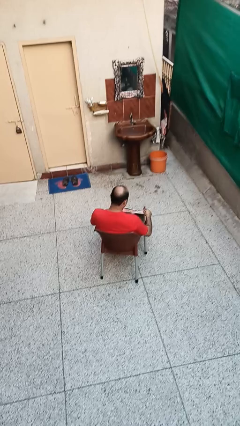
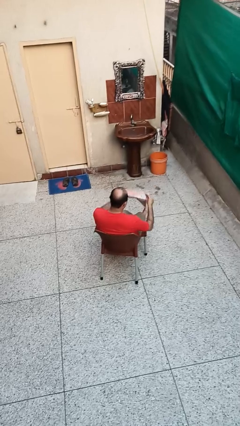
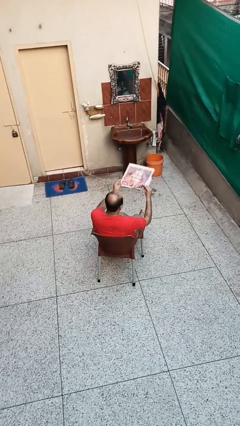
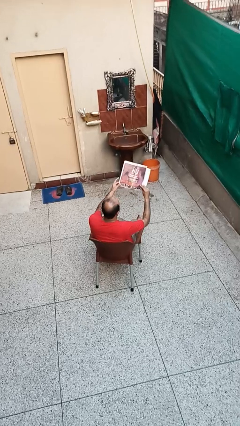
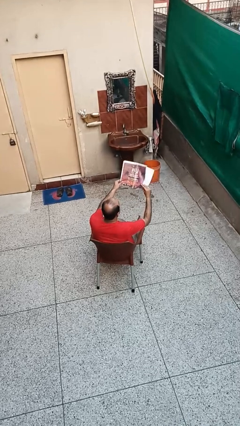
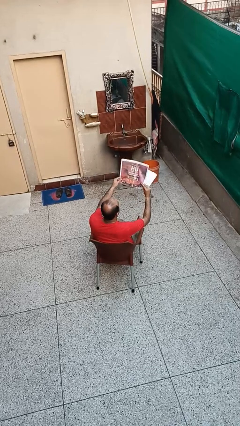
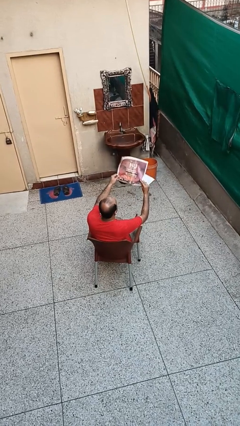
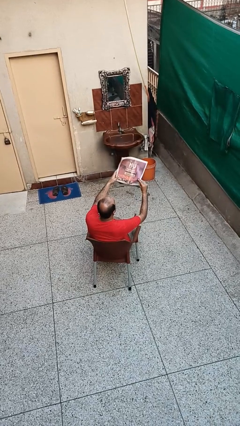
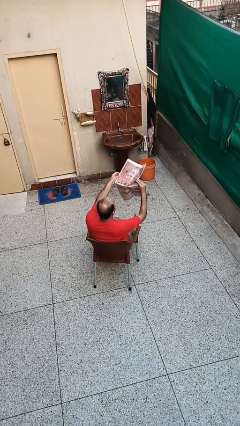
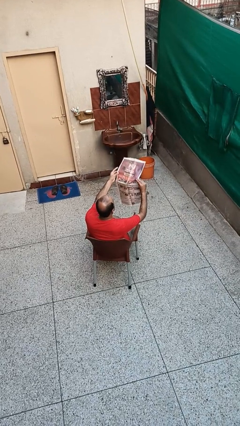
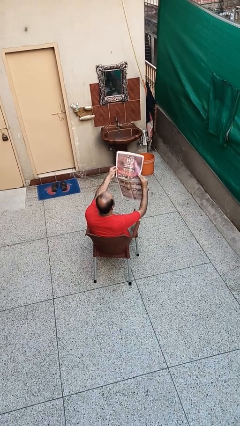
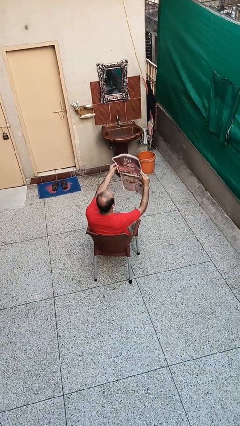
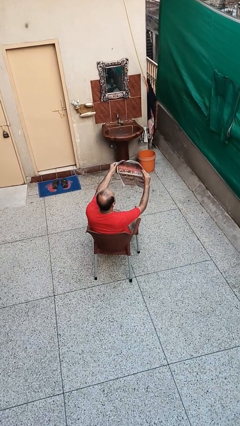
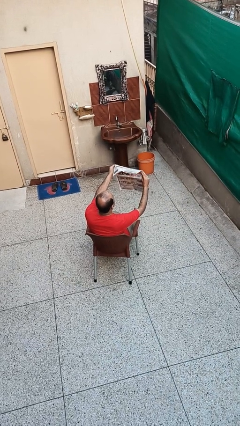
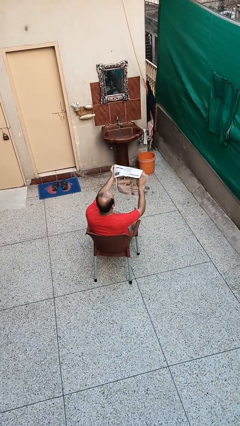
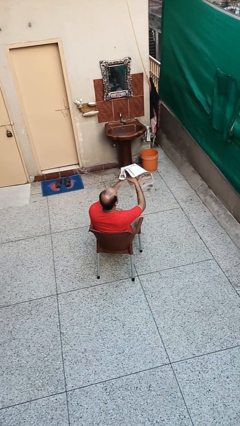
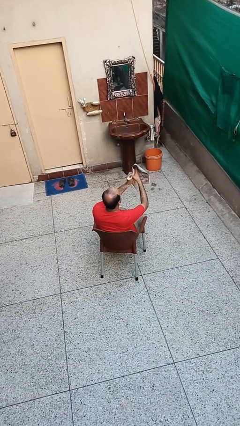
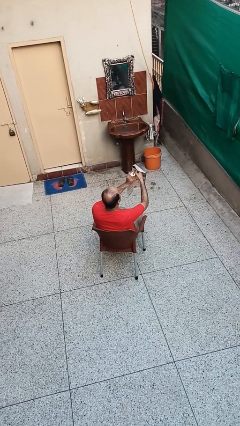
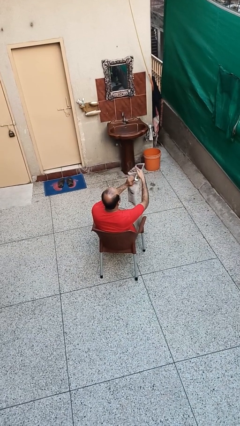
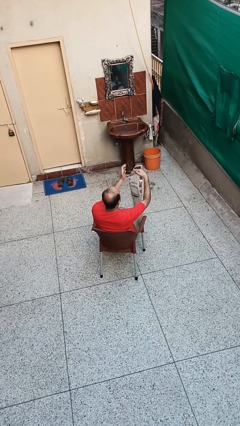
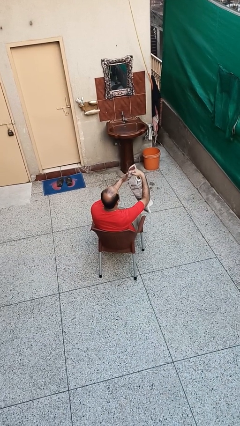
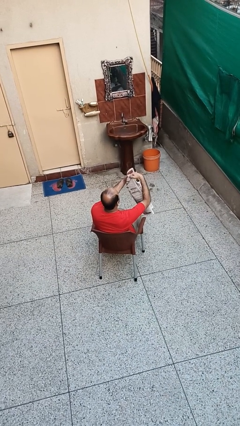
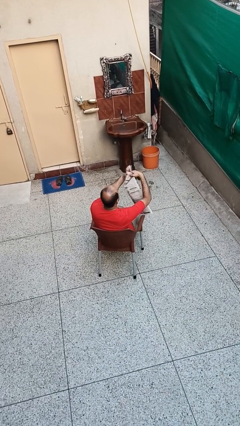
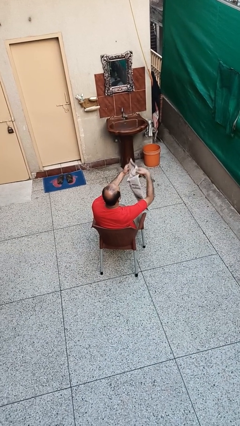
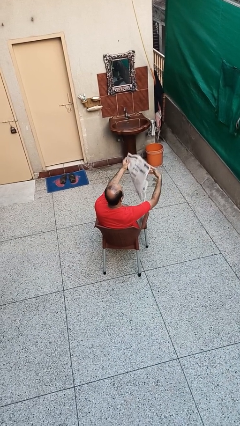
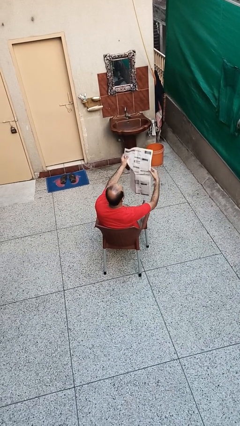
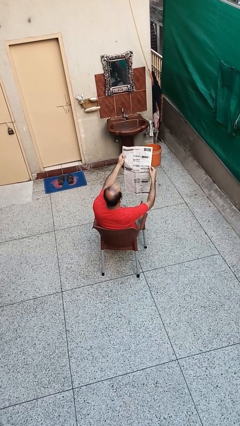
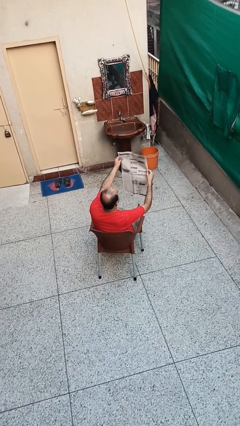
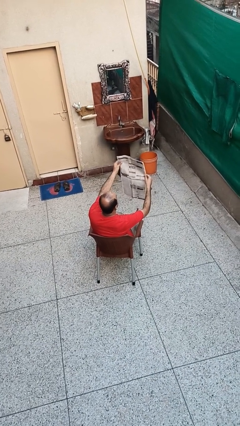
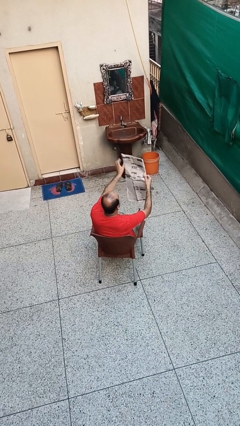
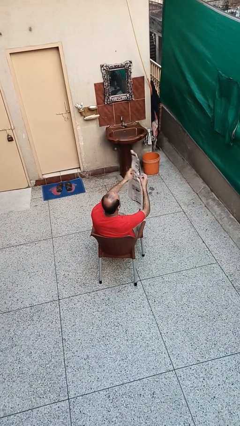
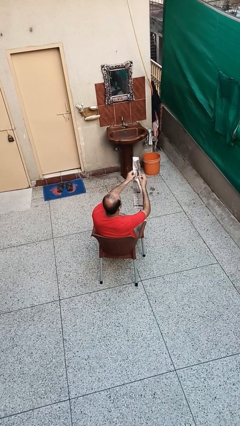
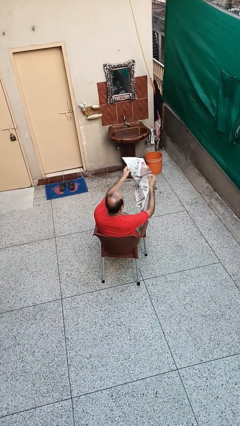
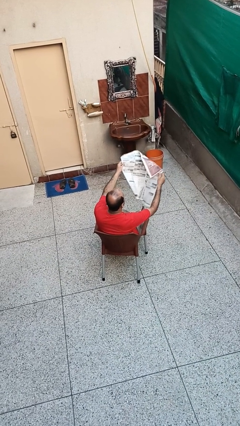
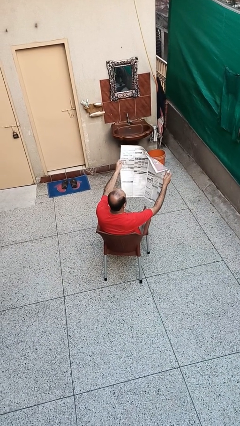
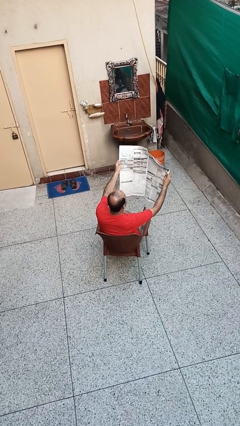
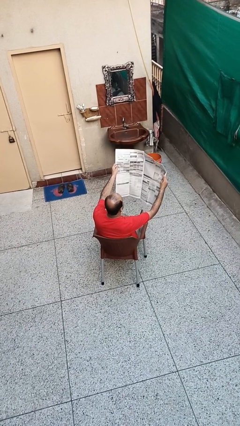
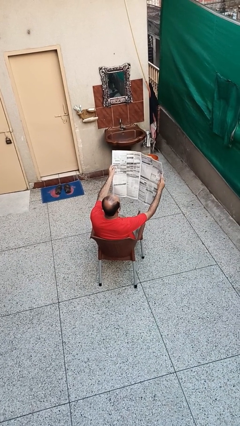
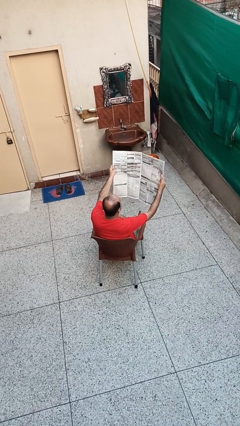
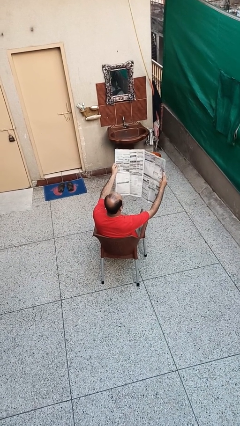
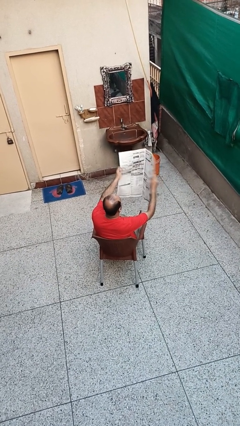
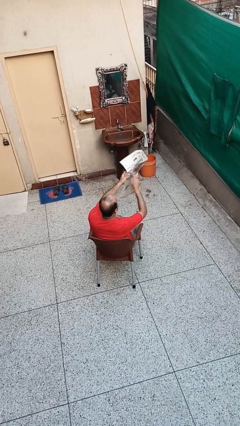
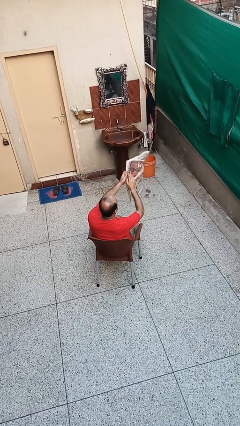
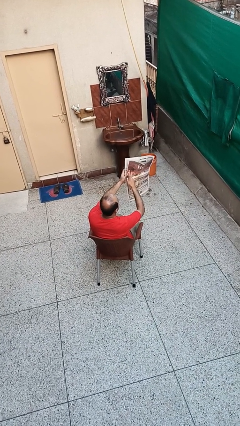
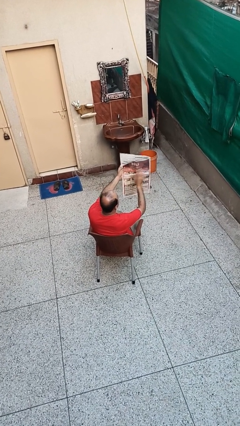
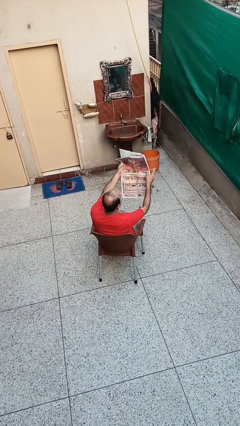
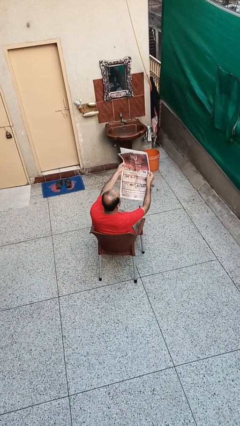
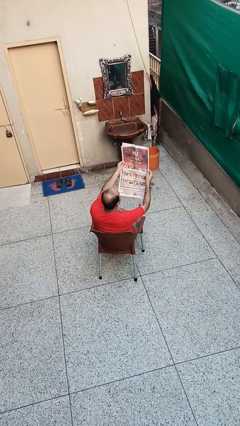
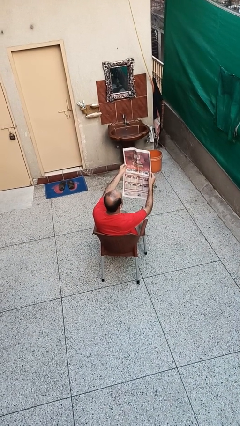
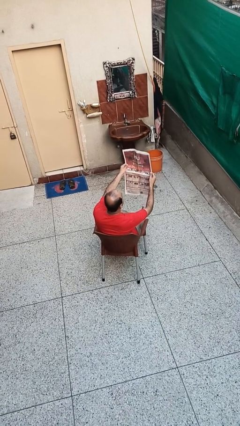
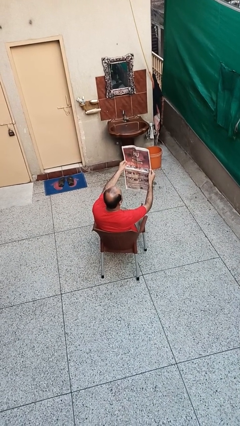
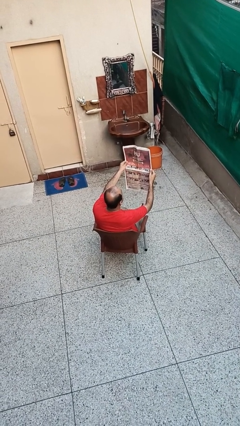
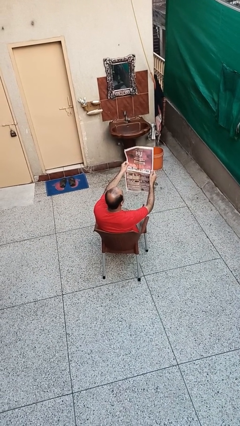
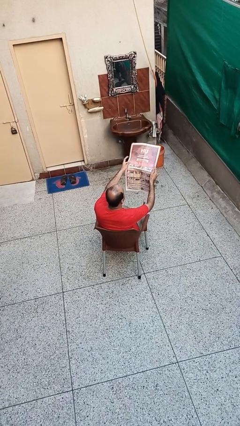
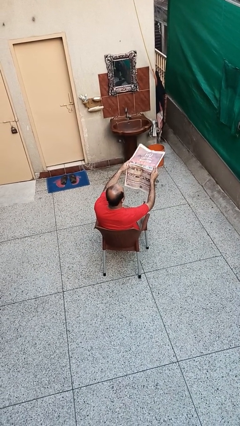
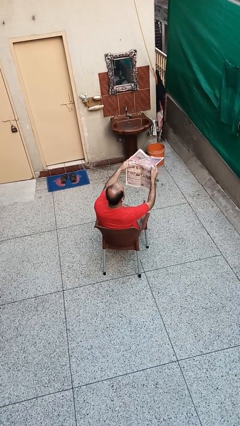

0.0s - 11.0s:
person reads newspaper

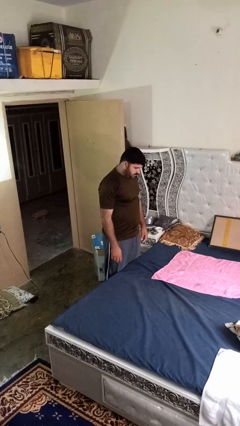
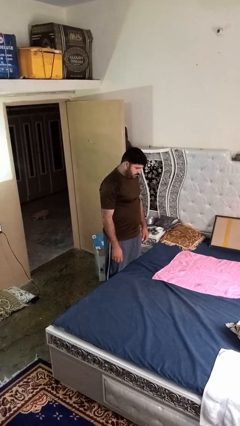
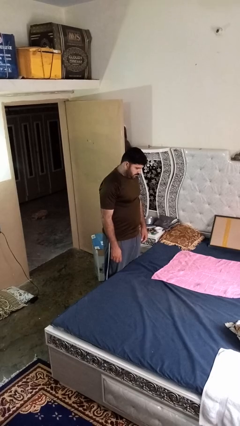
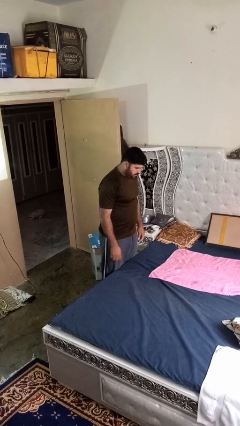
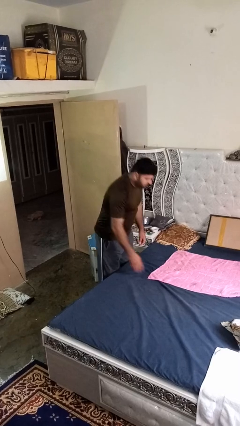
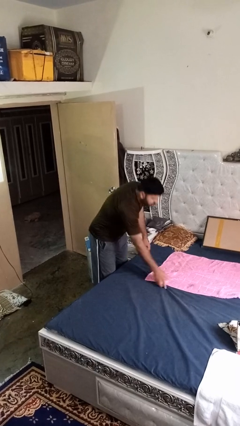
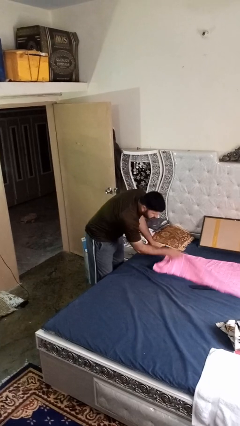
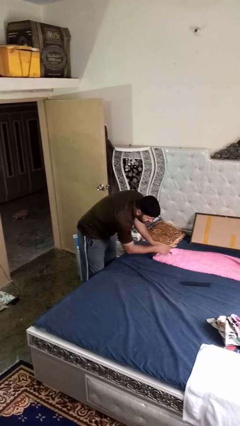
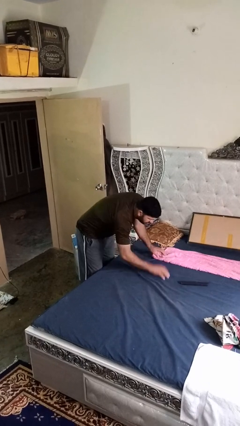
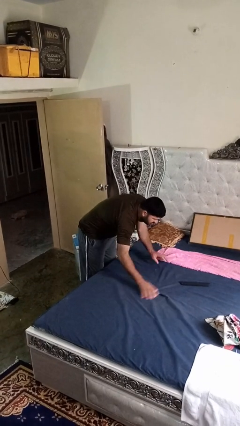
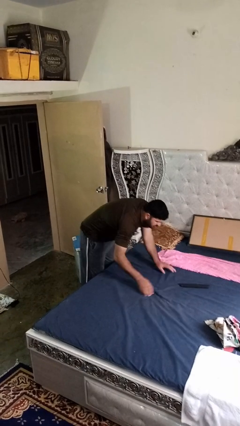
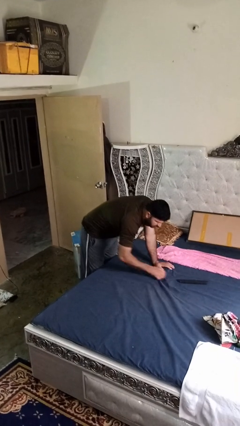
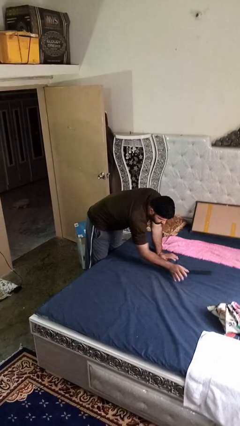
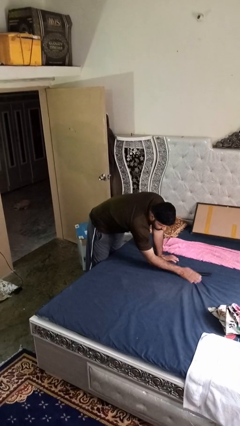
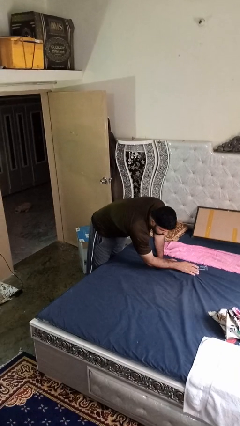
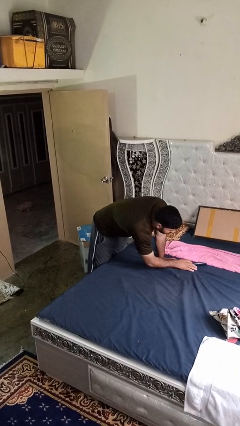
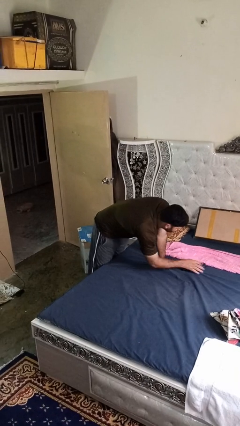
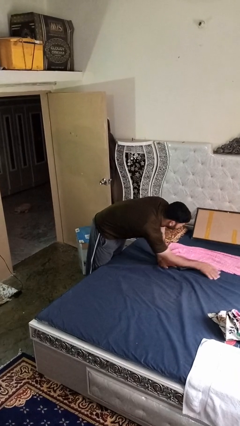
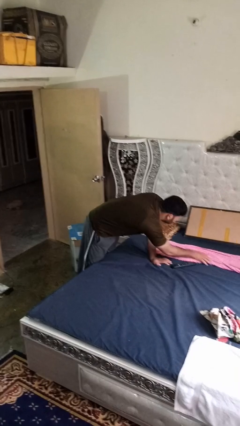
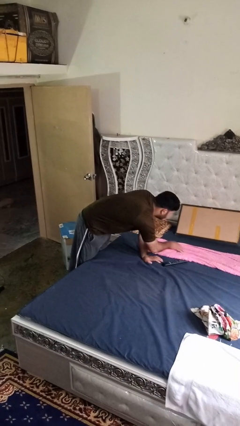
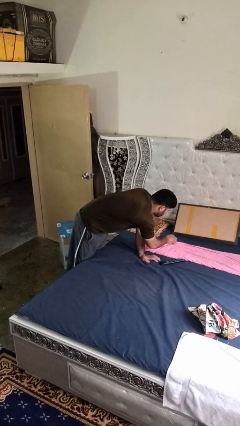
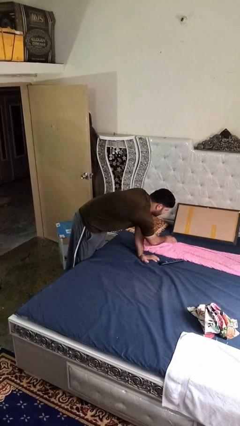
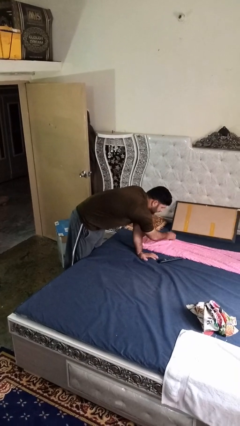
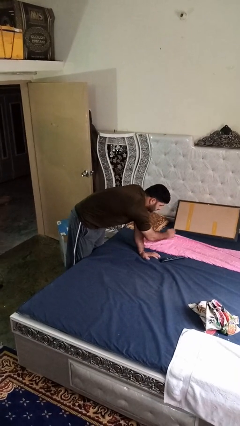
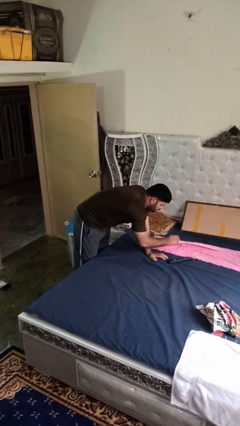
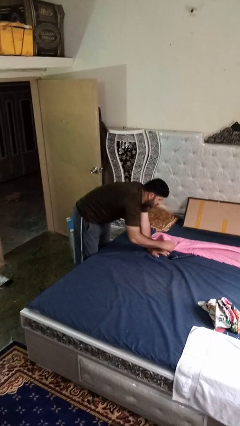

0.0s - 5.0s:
person searches under bed

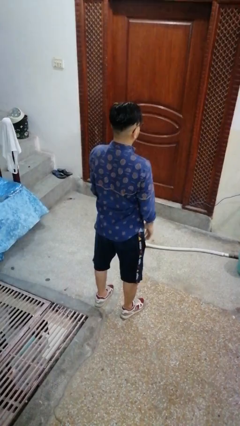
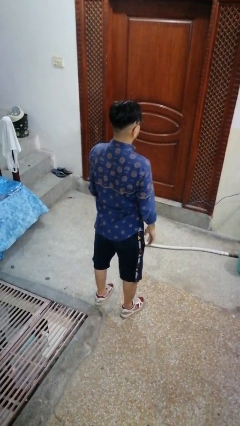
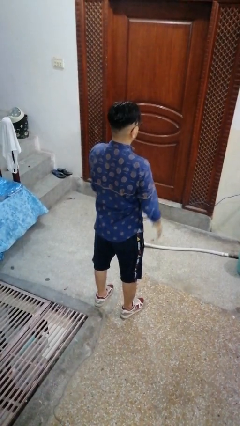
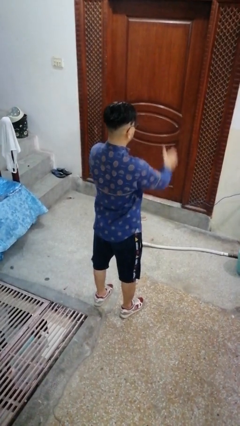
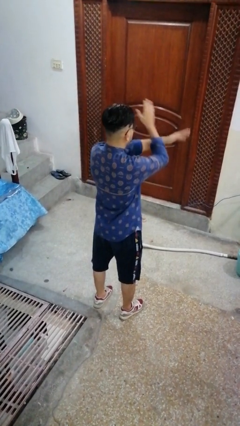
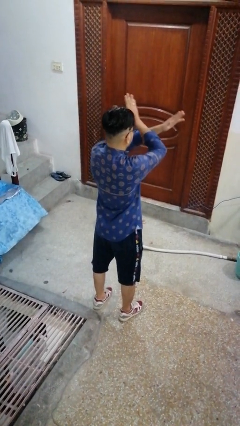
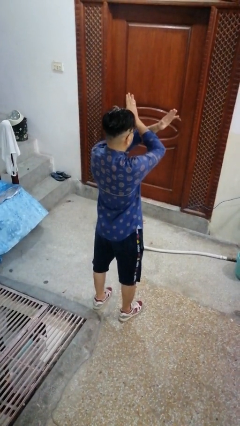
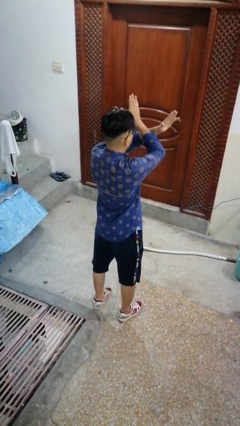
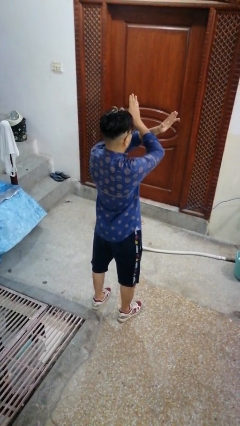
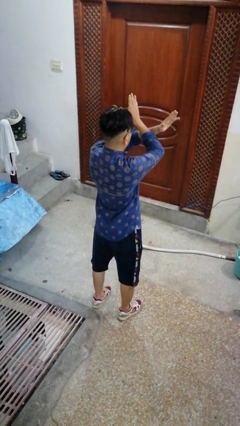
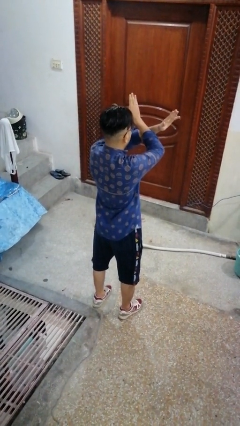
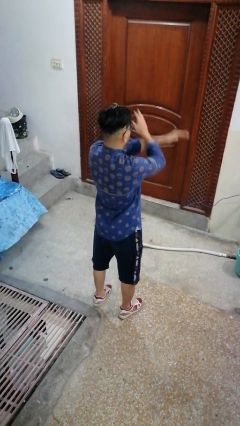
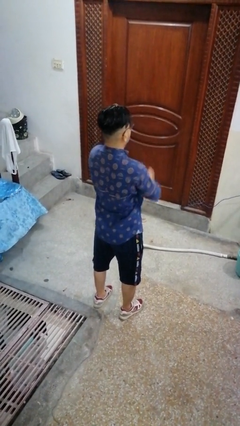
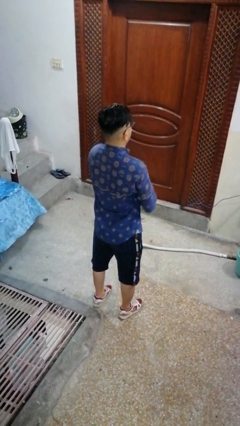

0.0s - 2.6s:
person gestures arms x
